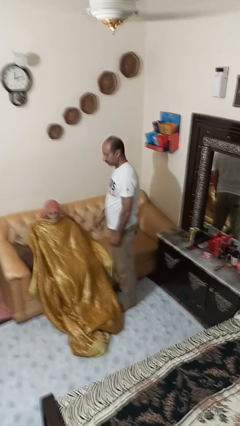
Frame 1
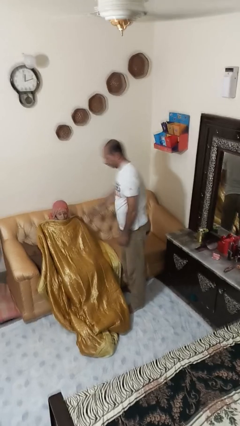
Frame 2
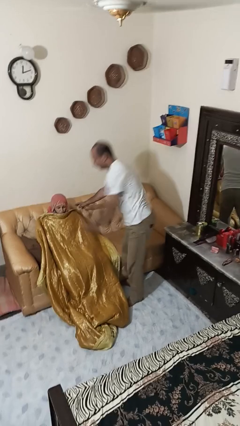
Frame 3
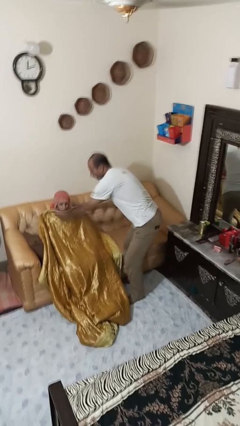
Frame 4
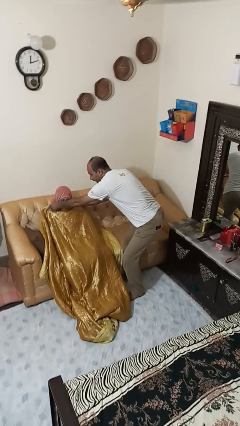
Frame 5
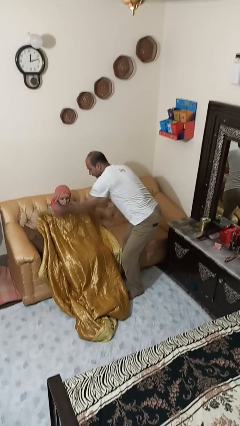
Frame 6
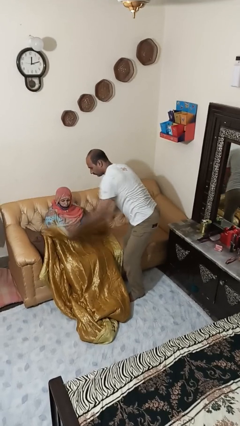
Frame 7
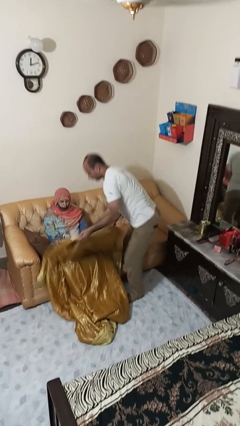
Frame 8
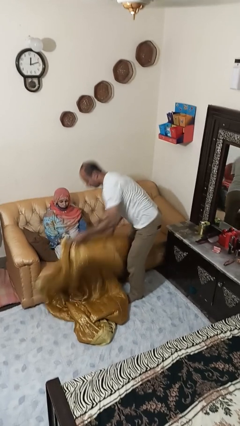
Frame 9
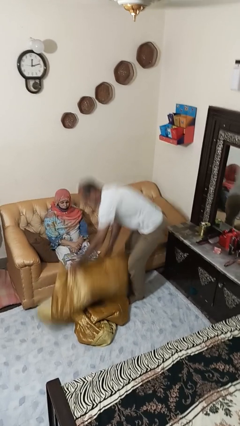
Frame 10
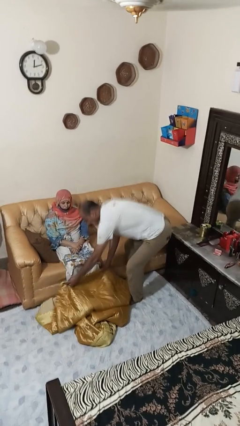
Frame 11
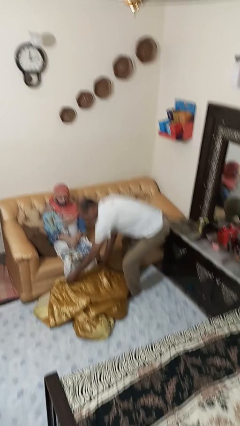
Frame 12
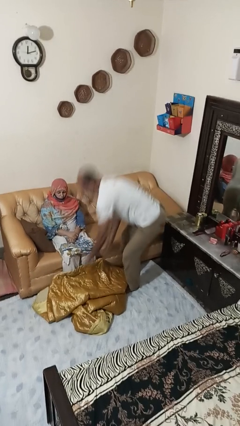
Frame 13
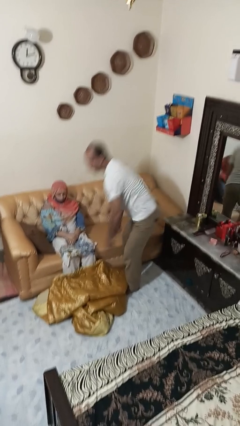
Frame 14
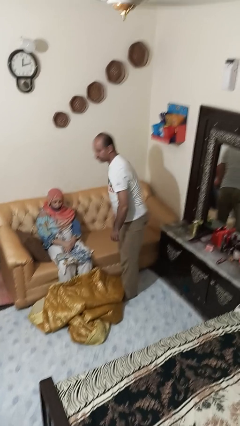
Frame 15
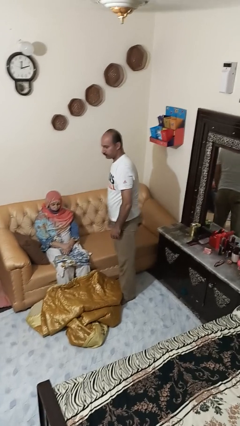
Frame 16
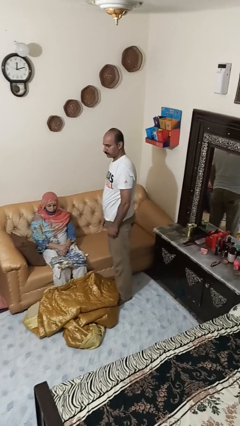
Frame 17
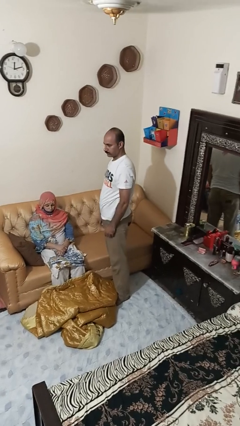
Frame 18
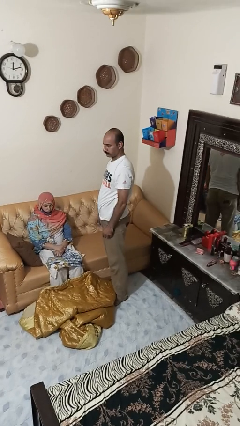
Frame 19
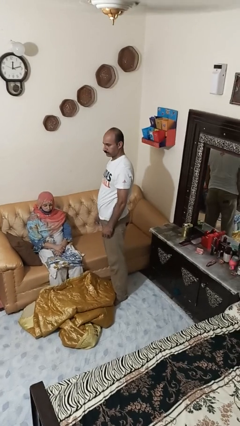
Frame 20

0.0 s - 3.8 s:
person uncovers friend with blanket

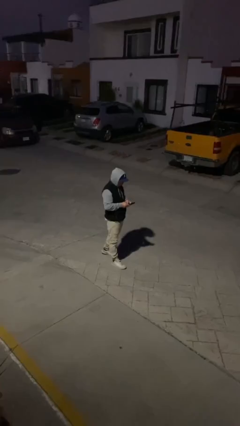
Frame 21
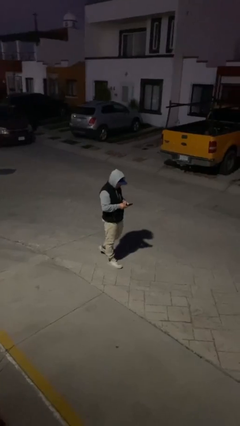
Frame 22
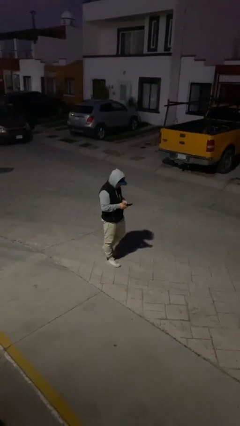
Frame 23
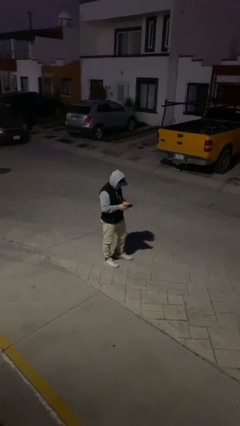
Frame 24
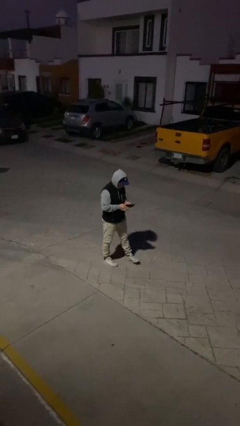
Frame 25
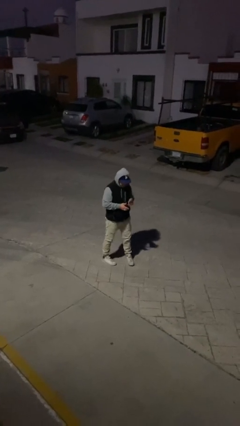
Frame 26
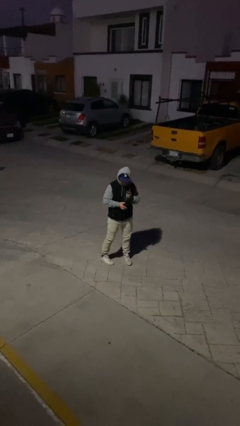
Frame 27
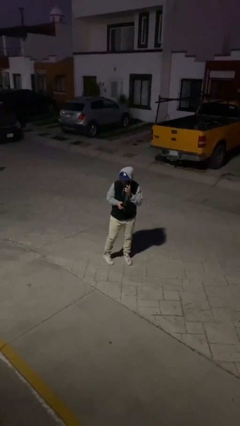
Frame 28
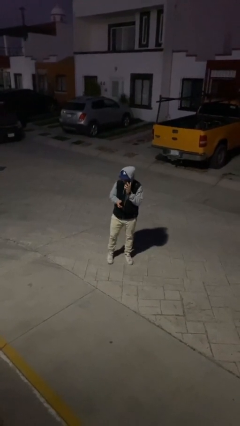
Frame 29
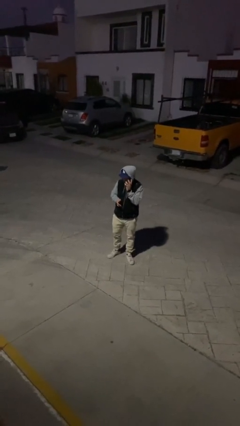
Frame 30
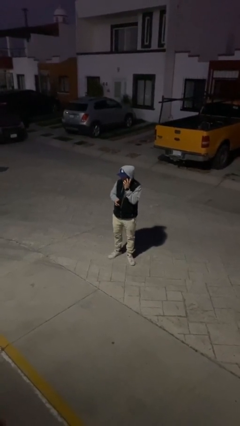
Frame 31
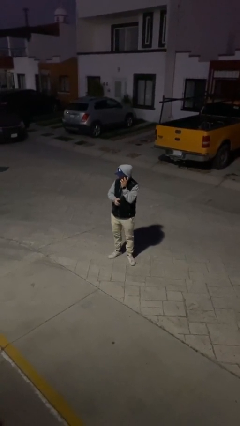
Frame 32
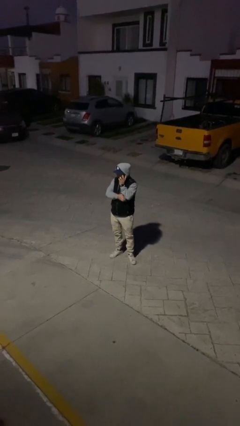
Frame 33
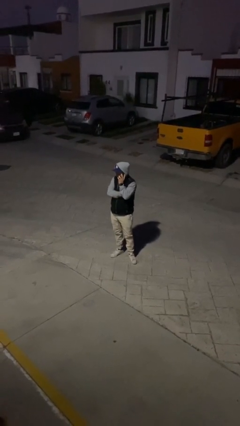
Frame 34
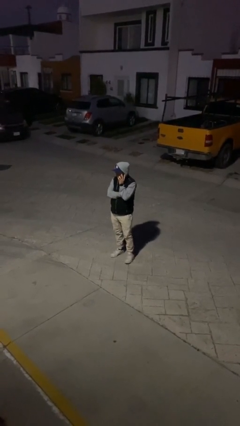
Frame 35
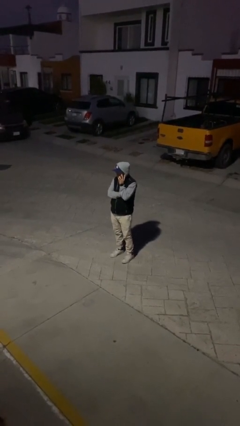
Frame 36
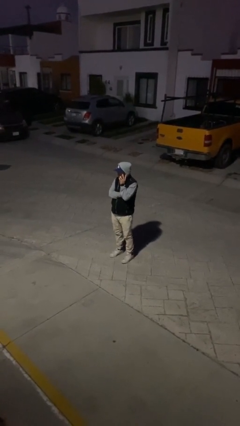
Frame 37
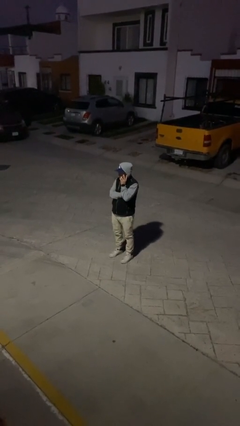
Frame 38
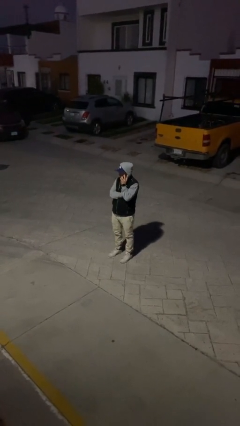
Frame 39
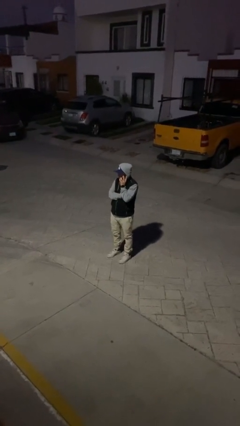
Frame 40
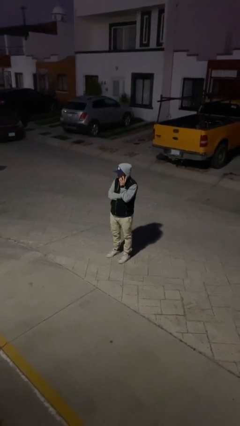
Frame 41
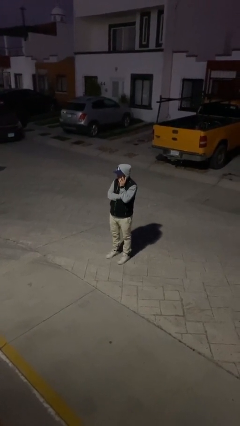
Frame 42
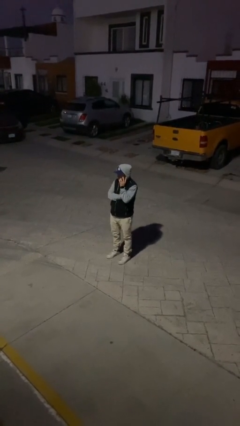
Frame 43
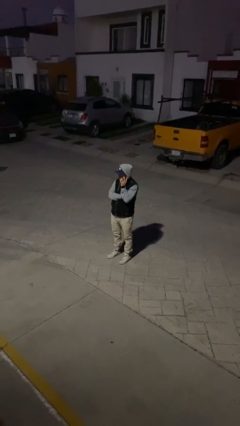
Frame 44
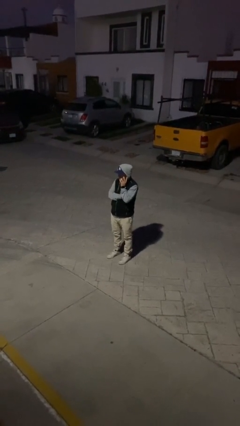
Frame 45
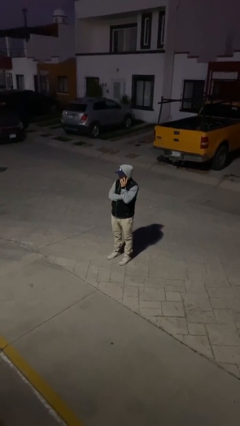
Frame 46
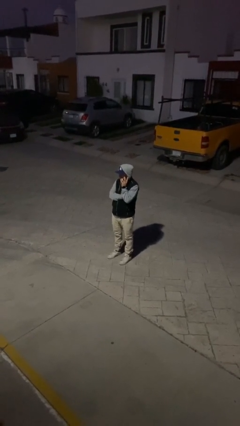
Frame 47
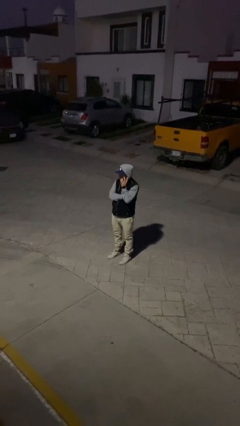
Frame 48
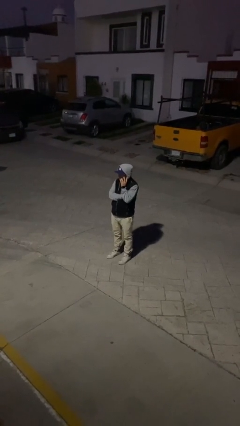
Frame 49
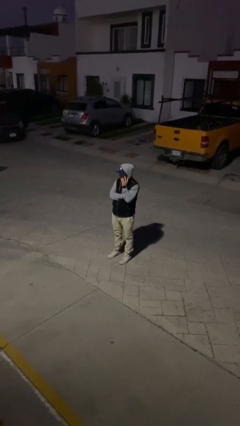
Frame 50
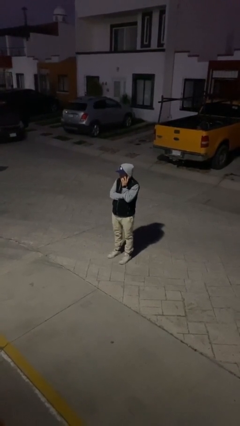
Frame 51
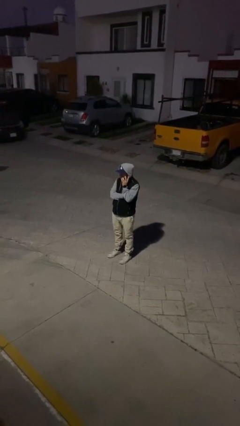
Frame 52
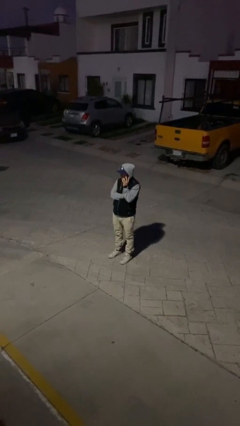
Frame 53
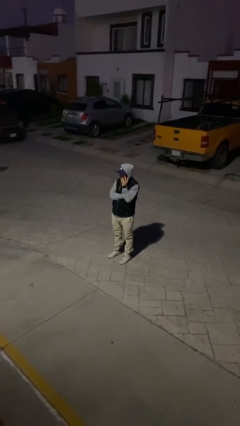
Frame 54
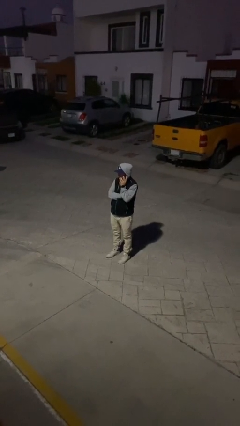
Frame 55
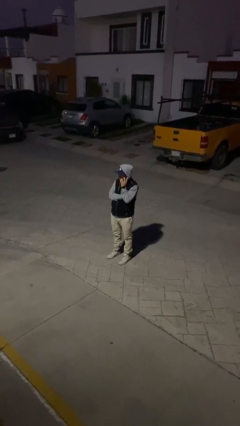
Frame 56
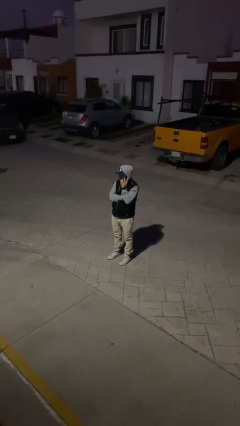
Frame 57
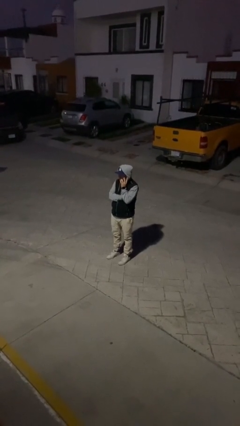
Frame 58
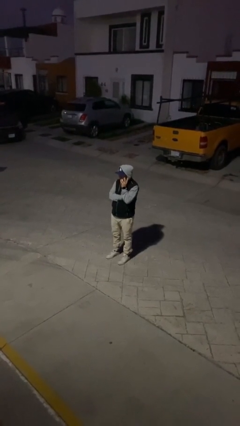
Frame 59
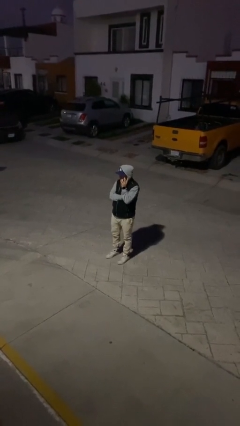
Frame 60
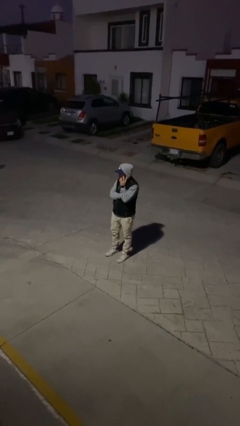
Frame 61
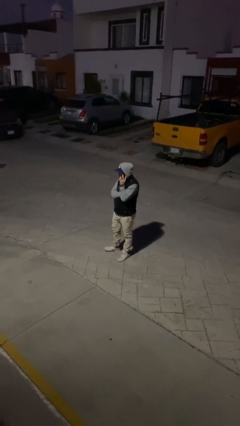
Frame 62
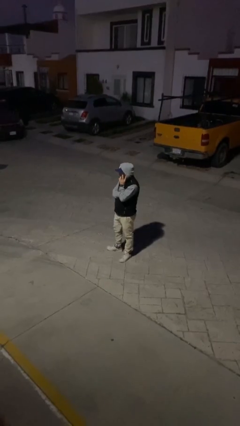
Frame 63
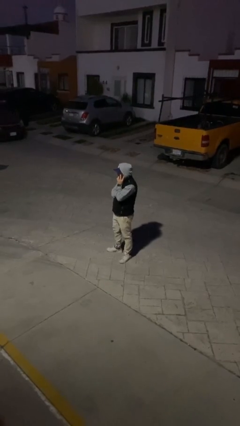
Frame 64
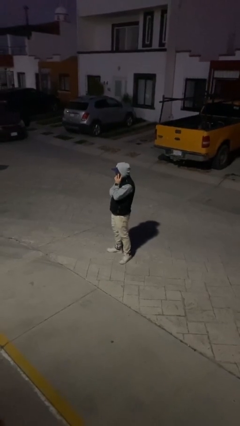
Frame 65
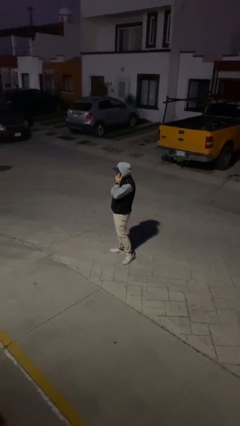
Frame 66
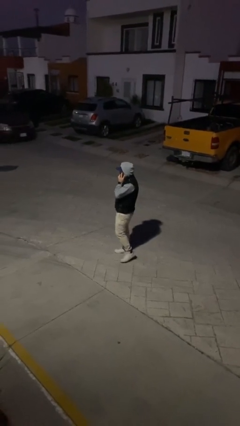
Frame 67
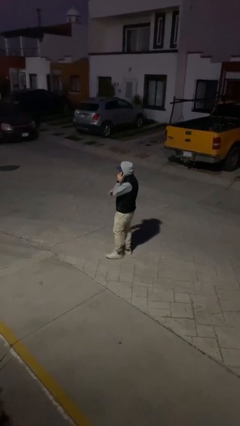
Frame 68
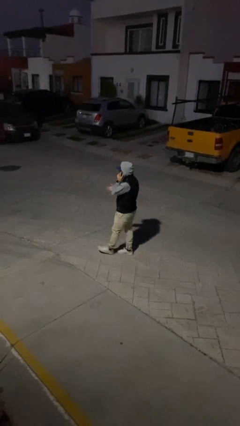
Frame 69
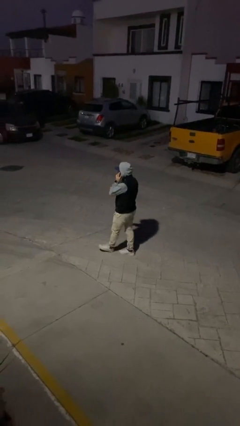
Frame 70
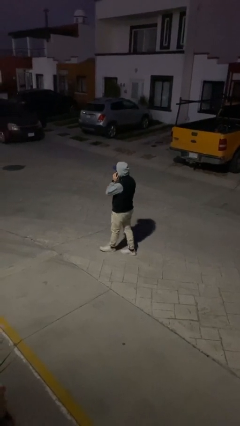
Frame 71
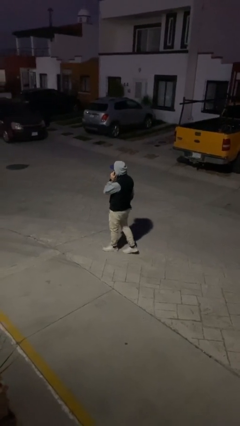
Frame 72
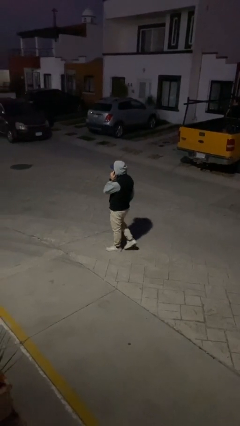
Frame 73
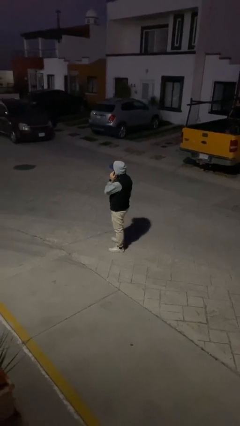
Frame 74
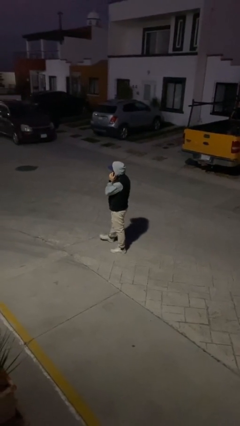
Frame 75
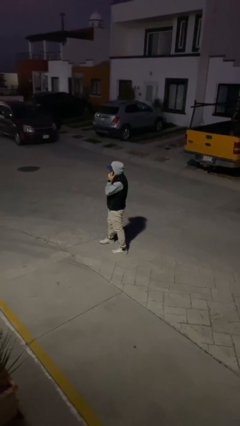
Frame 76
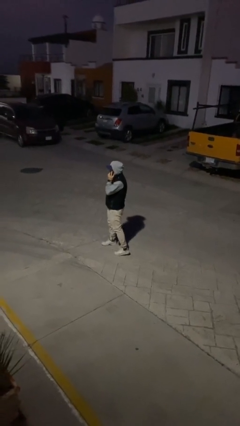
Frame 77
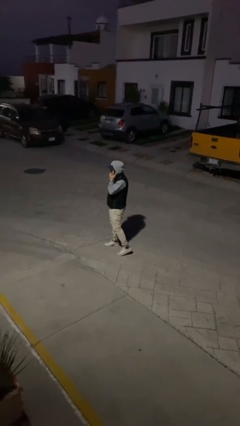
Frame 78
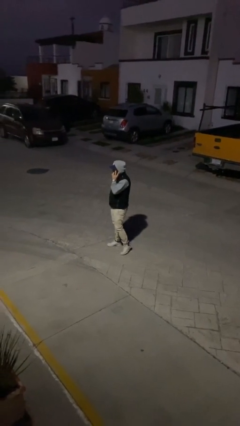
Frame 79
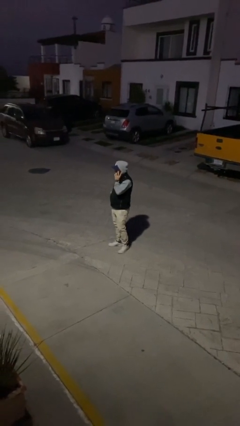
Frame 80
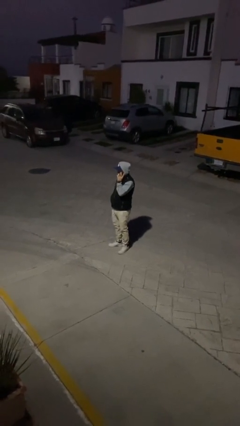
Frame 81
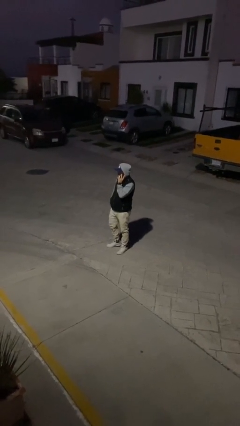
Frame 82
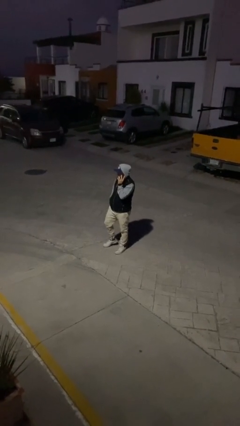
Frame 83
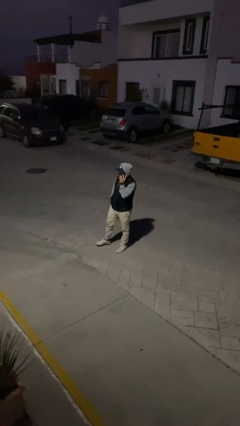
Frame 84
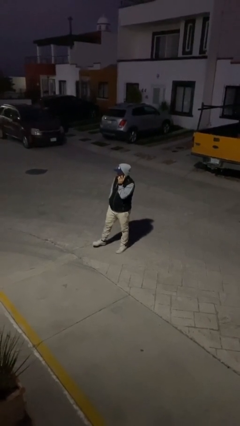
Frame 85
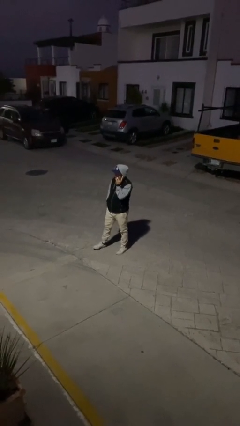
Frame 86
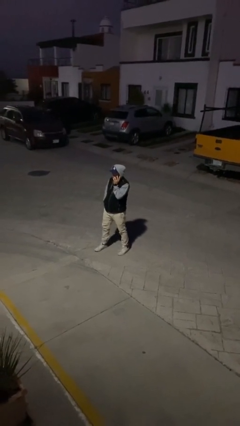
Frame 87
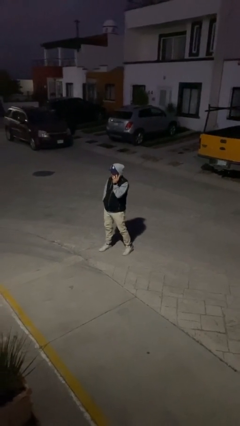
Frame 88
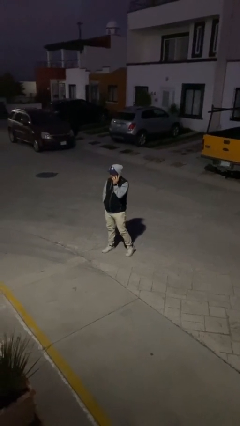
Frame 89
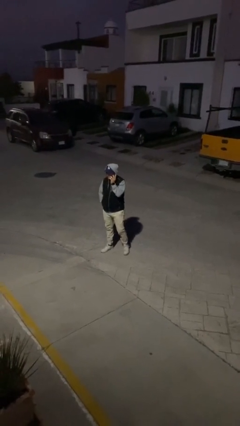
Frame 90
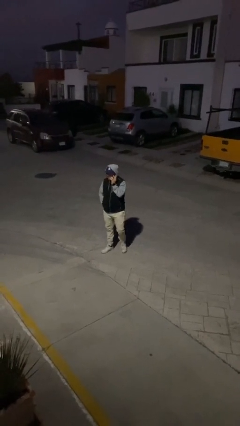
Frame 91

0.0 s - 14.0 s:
person talks on phone

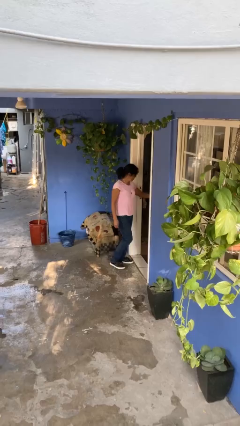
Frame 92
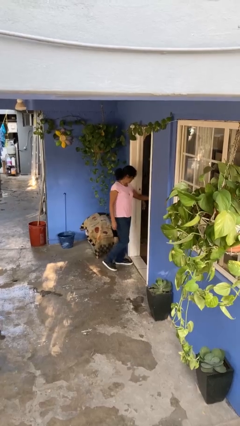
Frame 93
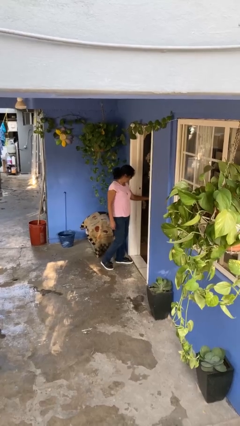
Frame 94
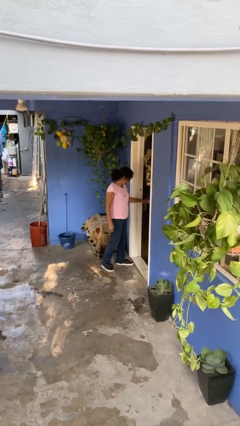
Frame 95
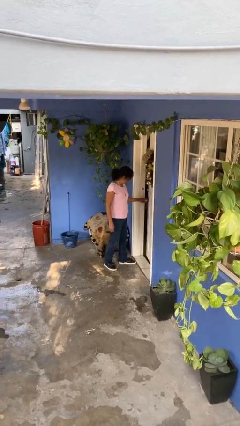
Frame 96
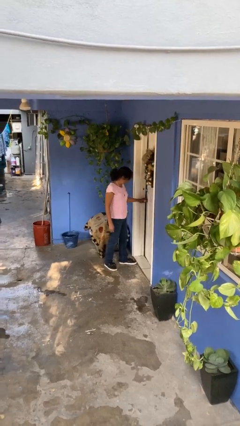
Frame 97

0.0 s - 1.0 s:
person closes facility door
